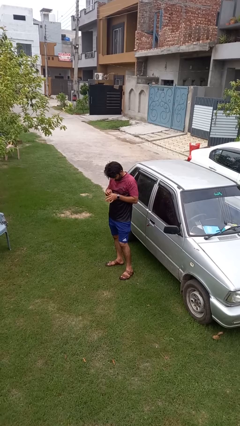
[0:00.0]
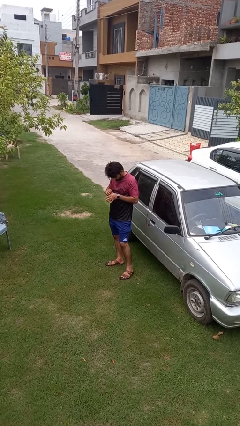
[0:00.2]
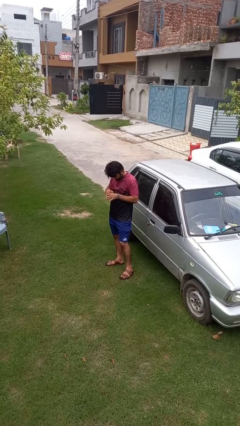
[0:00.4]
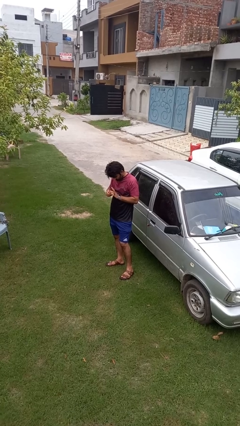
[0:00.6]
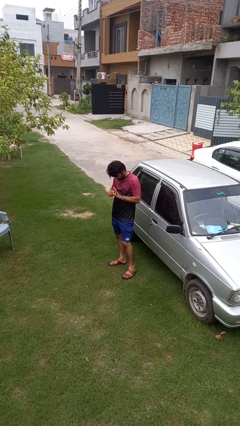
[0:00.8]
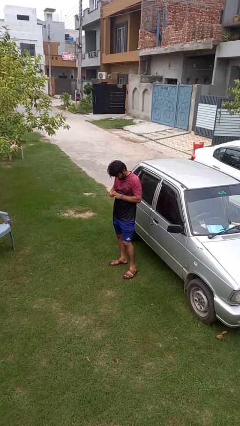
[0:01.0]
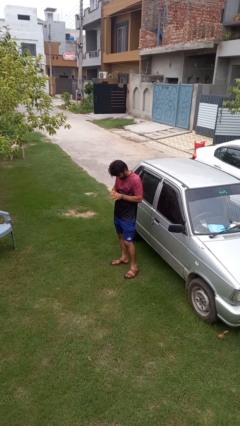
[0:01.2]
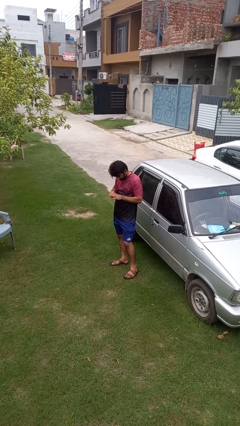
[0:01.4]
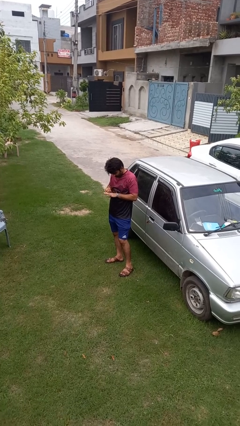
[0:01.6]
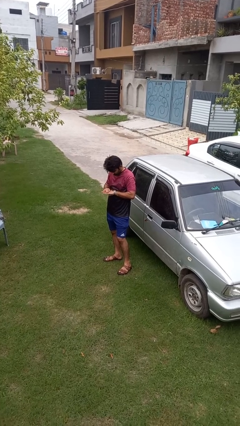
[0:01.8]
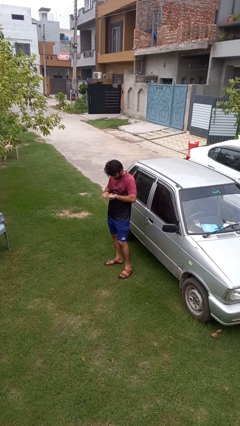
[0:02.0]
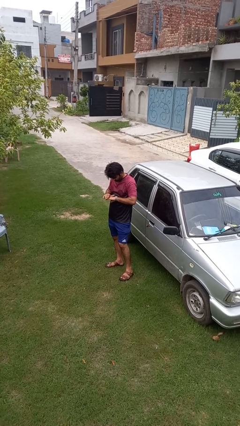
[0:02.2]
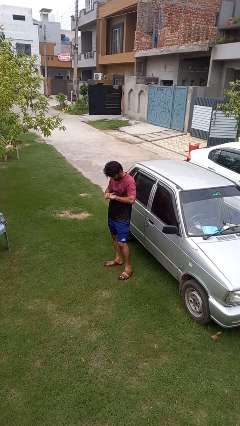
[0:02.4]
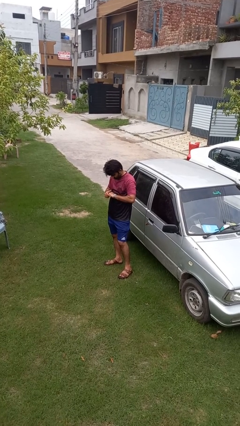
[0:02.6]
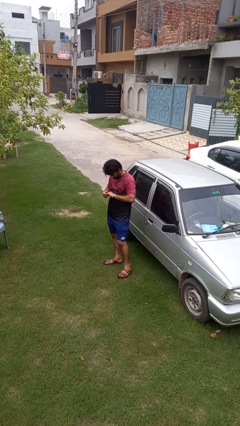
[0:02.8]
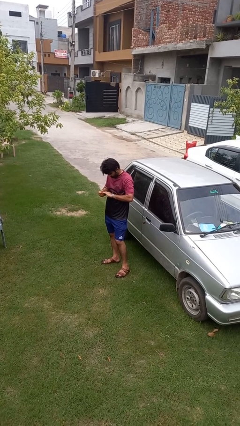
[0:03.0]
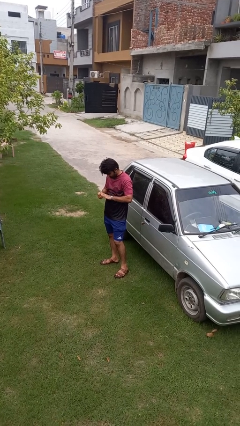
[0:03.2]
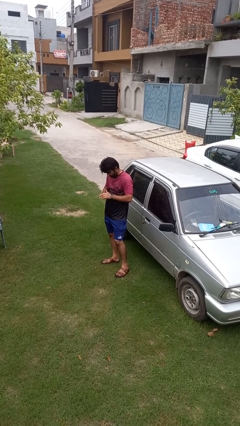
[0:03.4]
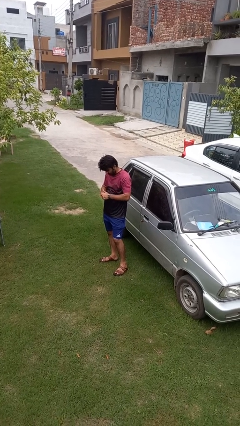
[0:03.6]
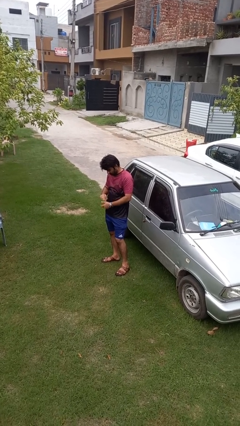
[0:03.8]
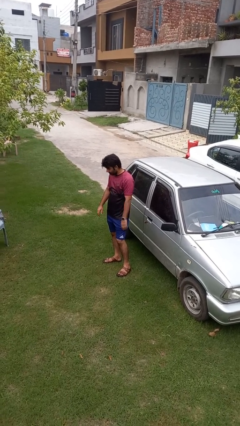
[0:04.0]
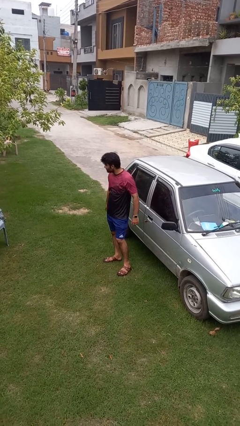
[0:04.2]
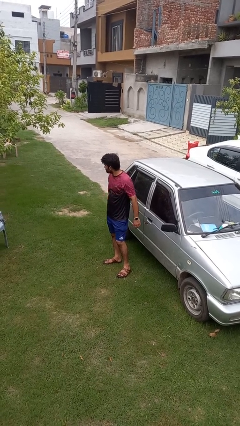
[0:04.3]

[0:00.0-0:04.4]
person cracks knuckles

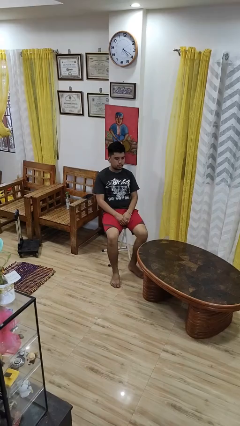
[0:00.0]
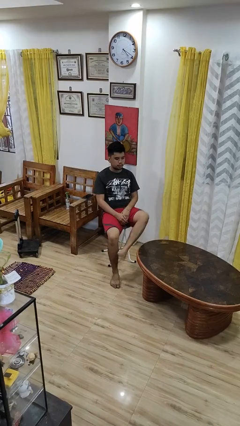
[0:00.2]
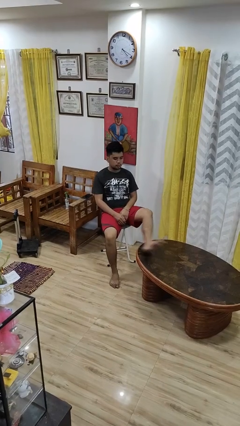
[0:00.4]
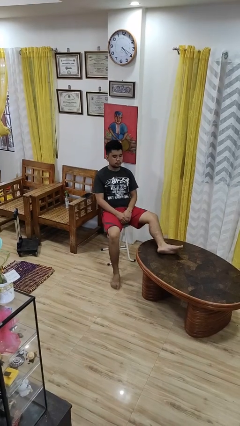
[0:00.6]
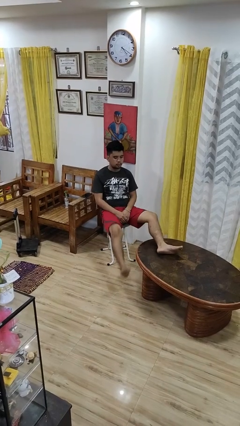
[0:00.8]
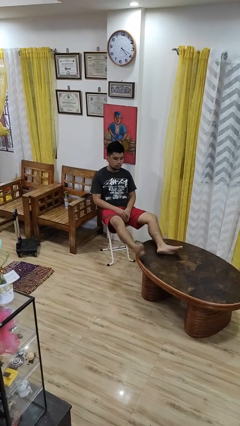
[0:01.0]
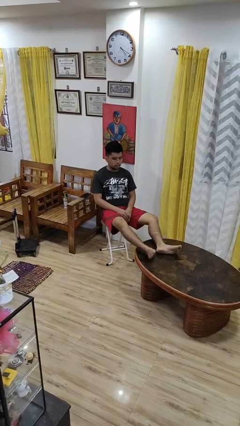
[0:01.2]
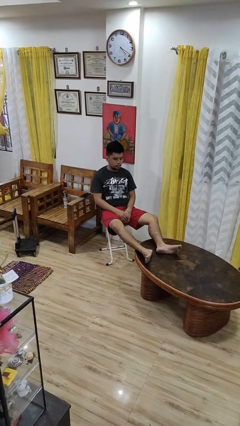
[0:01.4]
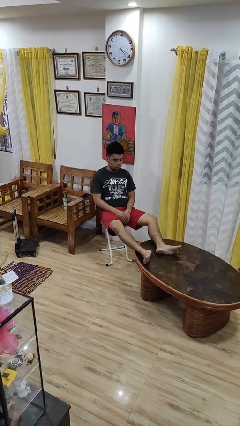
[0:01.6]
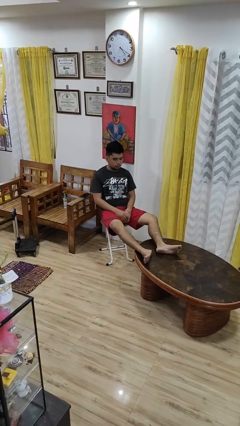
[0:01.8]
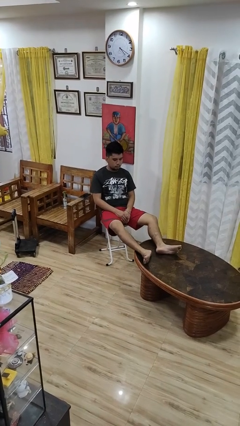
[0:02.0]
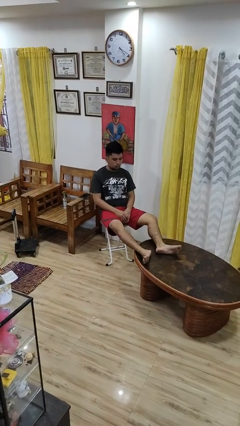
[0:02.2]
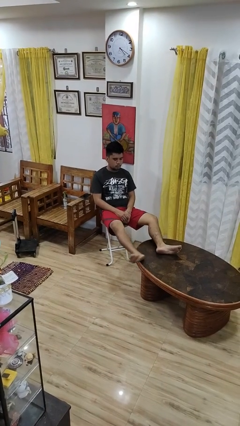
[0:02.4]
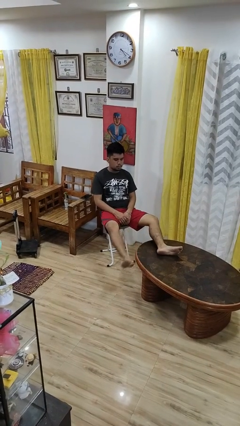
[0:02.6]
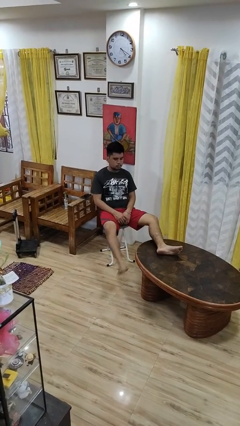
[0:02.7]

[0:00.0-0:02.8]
person puts feet up

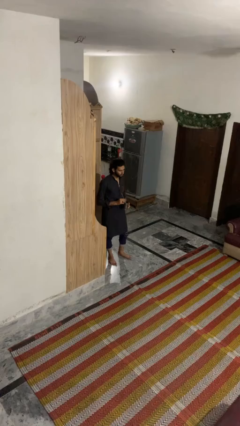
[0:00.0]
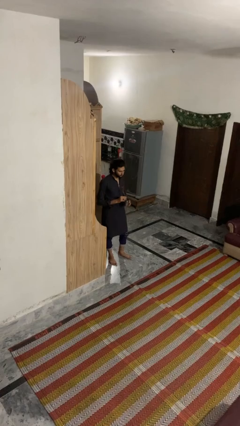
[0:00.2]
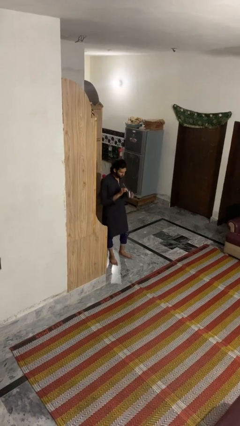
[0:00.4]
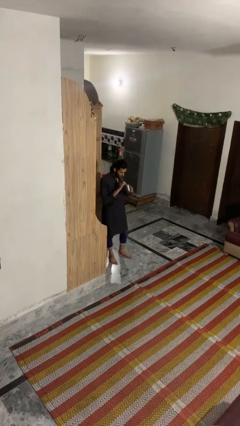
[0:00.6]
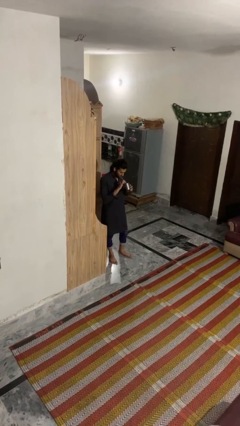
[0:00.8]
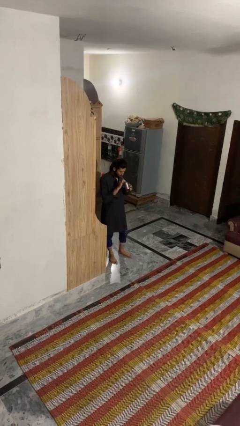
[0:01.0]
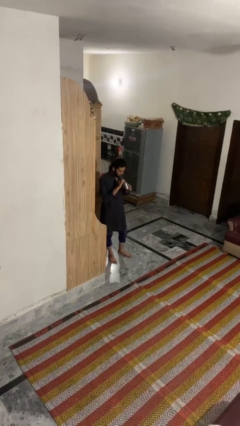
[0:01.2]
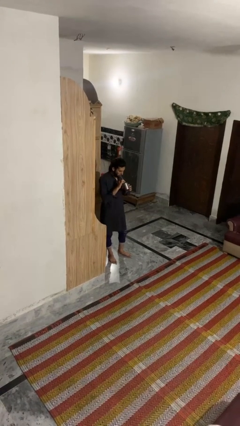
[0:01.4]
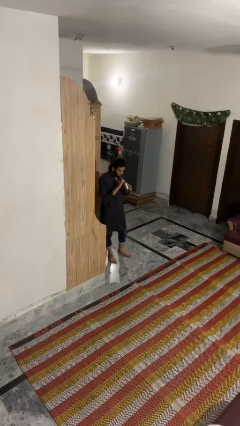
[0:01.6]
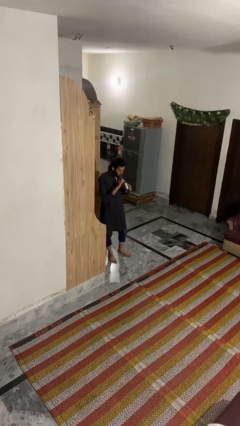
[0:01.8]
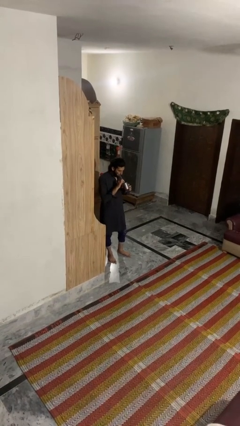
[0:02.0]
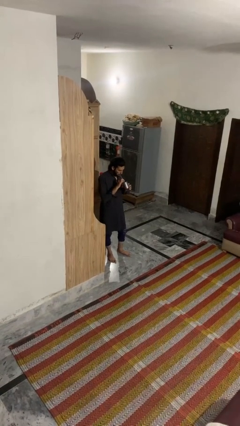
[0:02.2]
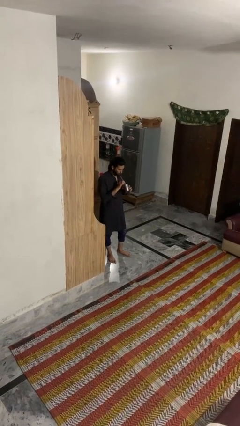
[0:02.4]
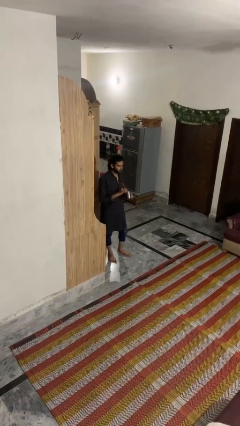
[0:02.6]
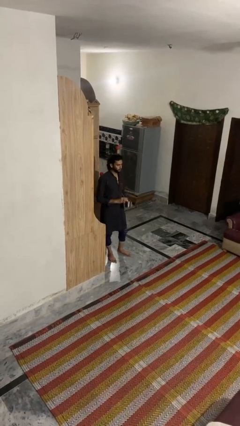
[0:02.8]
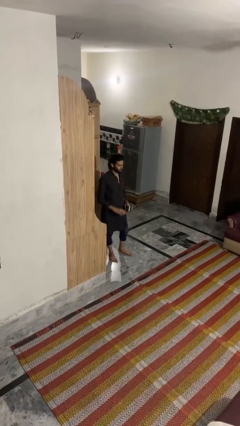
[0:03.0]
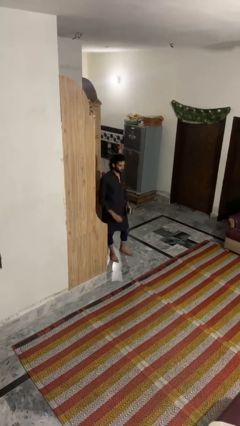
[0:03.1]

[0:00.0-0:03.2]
person drinks from straw

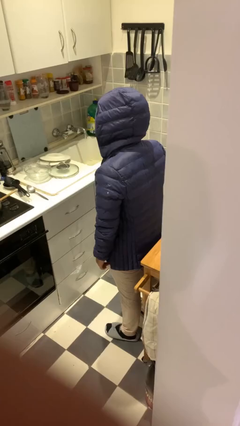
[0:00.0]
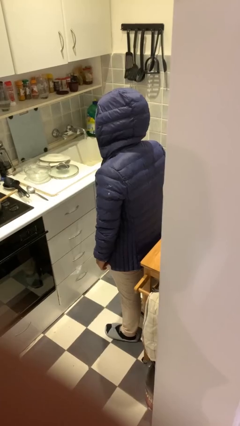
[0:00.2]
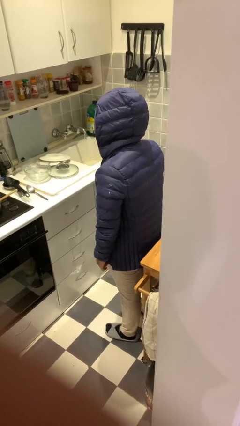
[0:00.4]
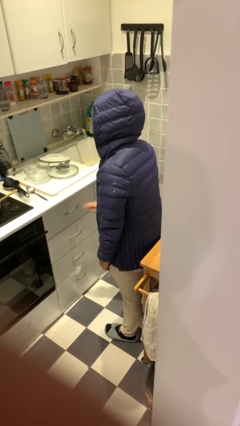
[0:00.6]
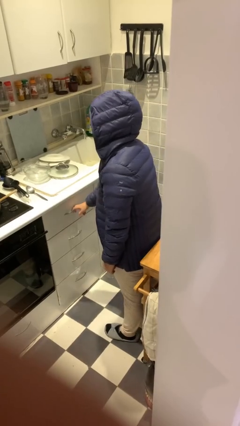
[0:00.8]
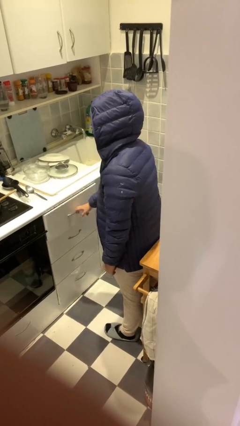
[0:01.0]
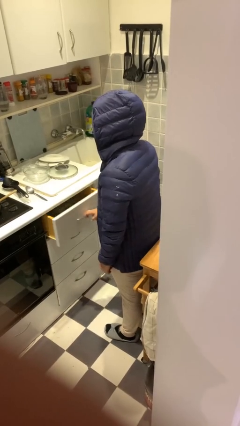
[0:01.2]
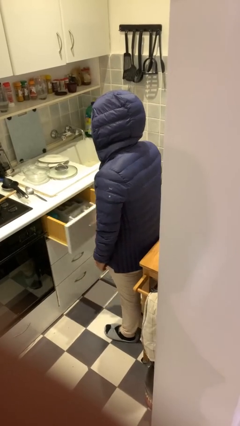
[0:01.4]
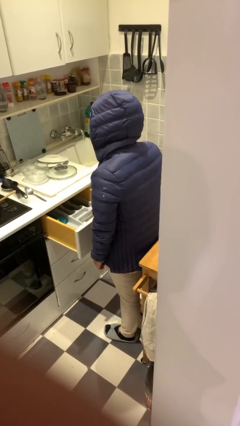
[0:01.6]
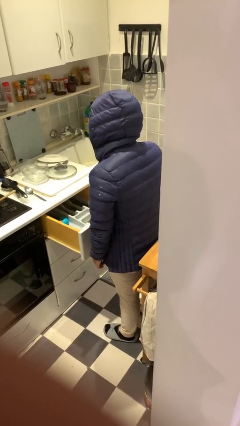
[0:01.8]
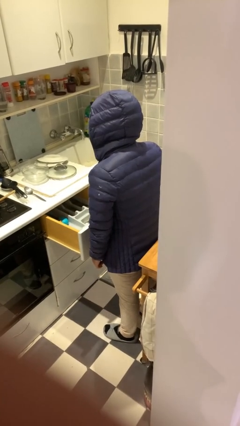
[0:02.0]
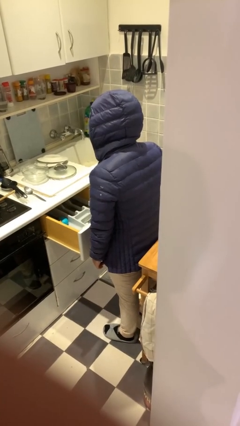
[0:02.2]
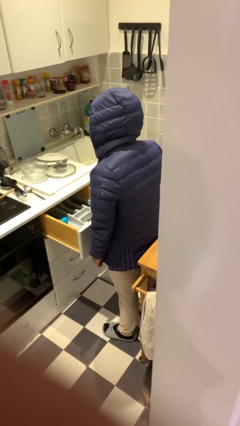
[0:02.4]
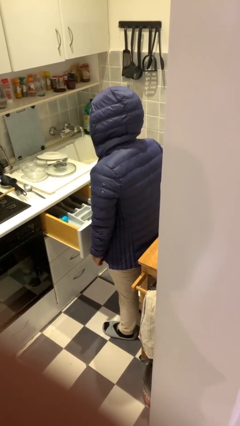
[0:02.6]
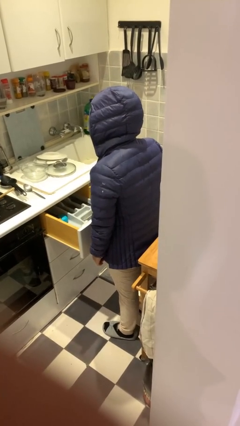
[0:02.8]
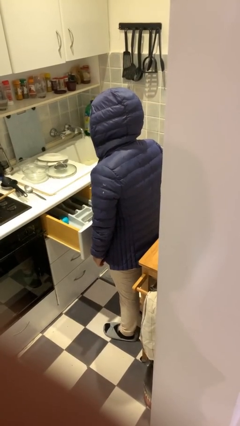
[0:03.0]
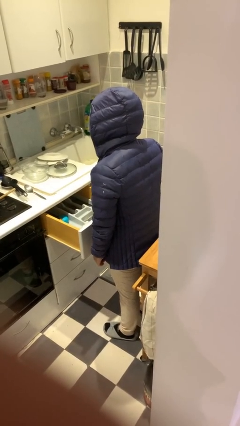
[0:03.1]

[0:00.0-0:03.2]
person opens kitchen drawer

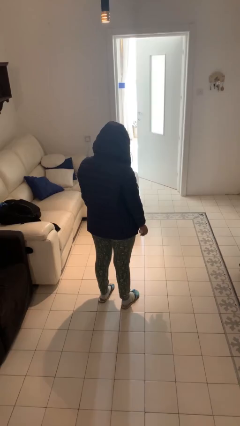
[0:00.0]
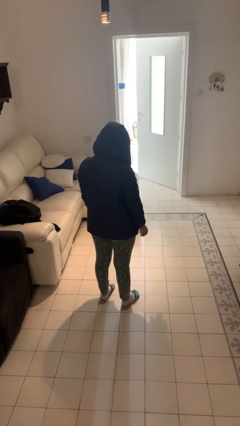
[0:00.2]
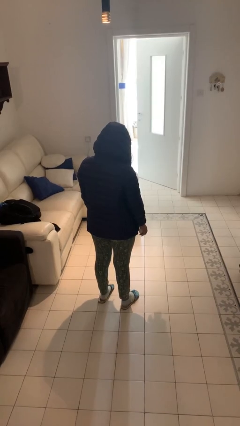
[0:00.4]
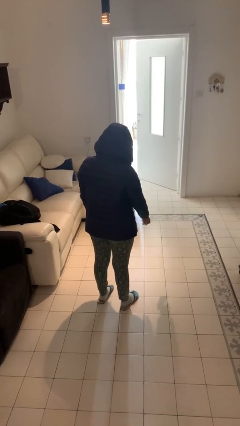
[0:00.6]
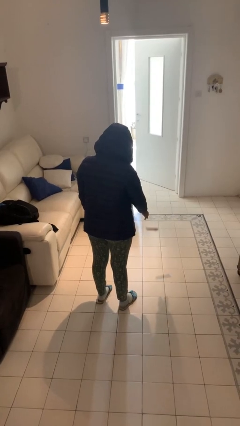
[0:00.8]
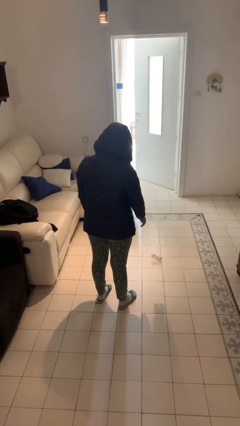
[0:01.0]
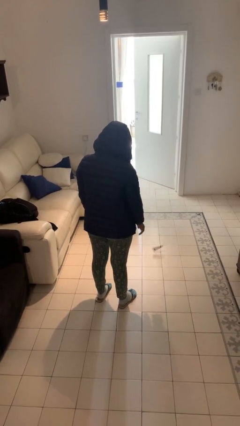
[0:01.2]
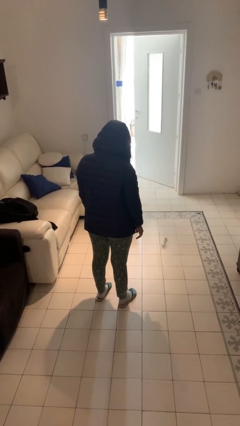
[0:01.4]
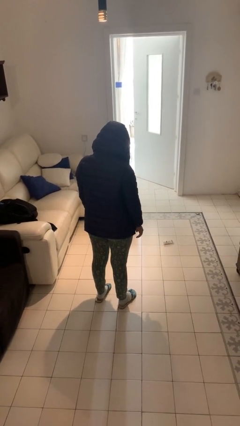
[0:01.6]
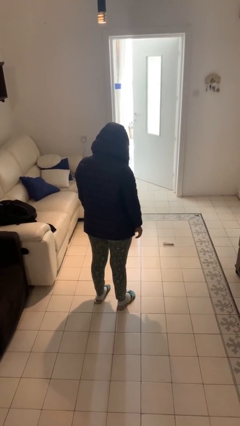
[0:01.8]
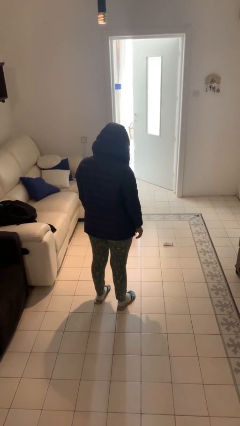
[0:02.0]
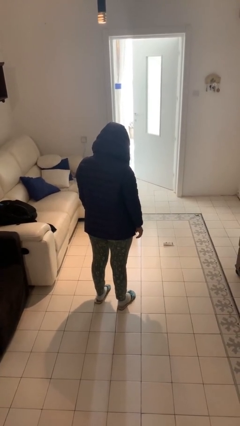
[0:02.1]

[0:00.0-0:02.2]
person throws object to ground

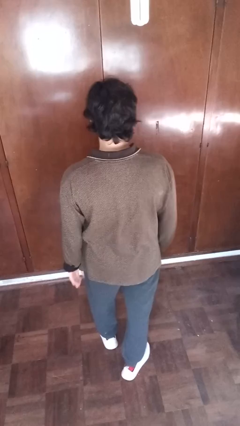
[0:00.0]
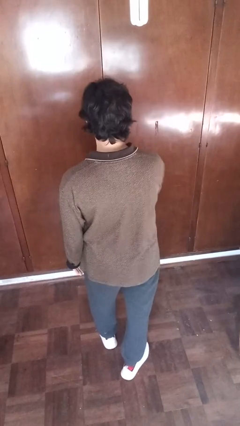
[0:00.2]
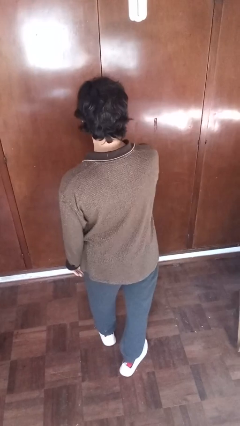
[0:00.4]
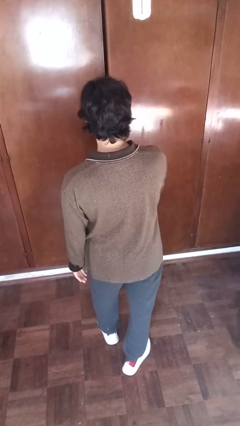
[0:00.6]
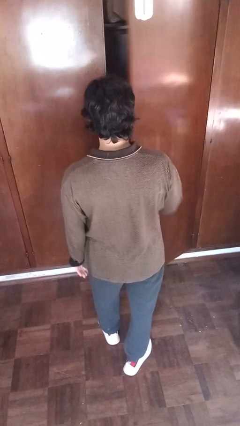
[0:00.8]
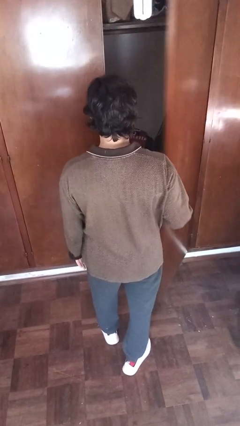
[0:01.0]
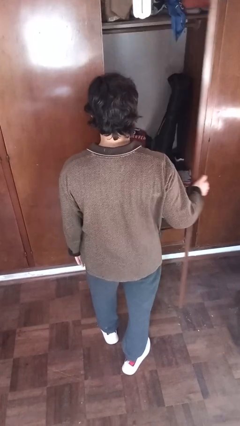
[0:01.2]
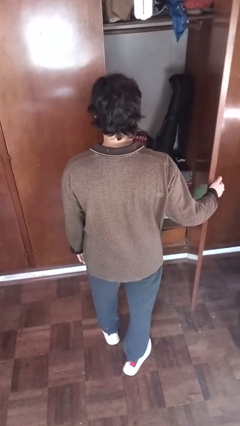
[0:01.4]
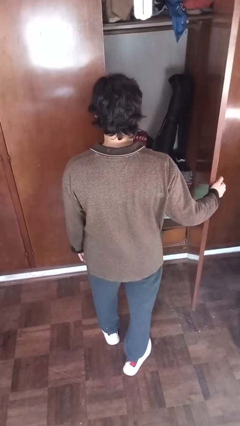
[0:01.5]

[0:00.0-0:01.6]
person opens closet door
